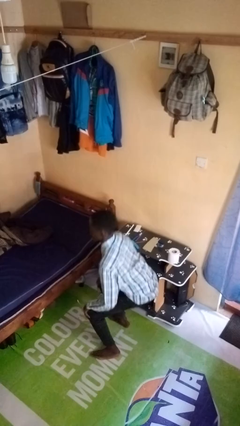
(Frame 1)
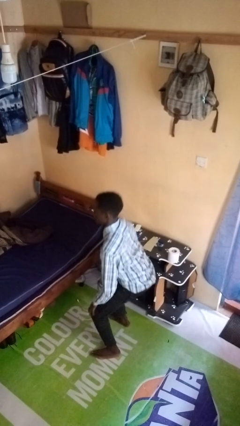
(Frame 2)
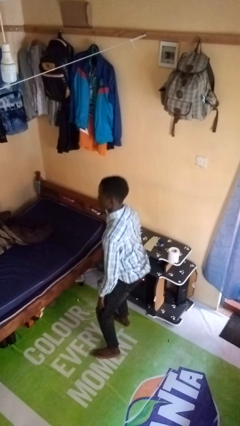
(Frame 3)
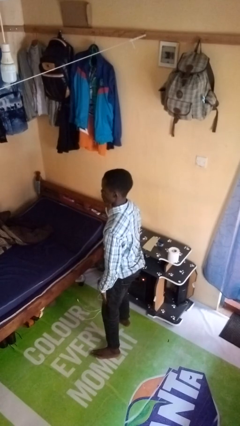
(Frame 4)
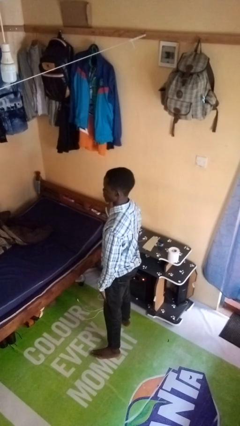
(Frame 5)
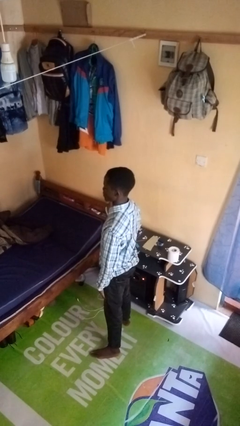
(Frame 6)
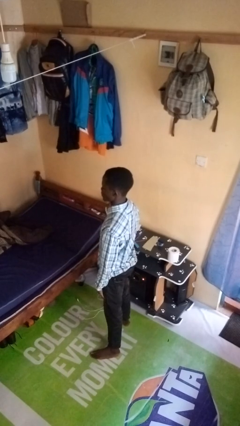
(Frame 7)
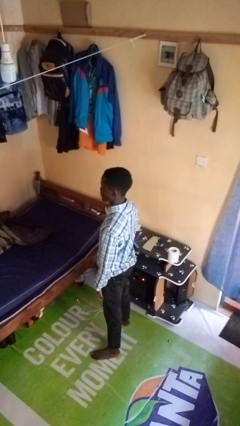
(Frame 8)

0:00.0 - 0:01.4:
person stands up

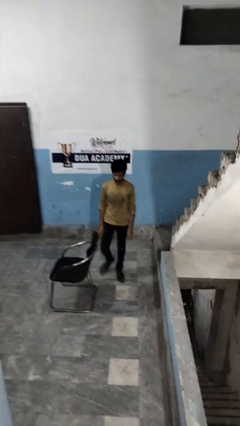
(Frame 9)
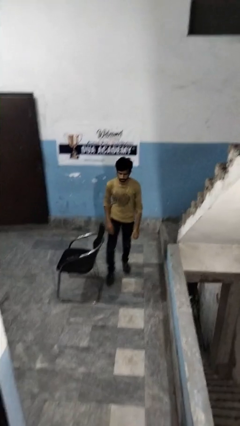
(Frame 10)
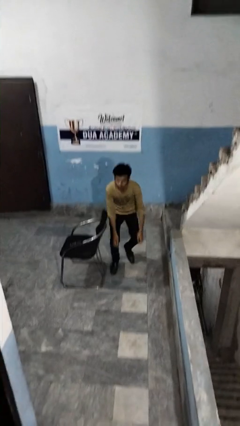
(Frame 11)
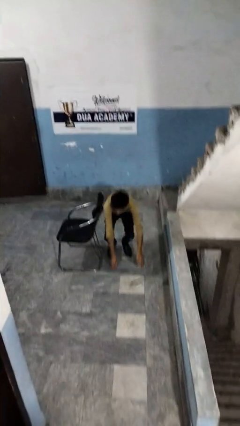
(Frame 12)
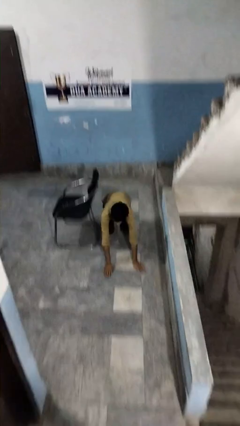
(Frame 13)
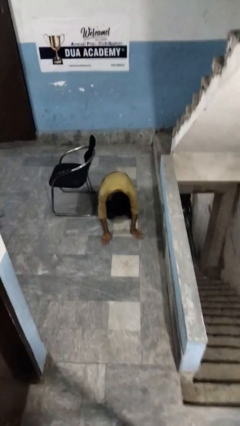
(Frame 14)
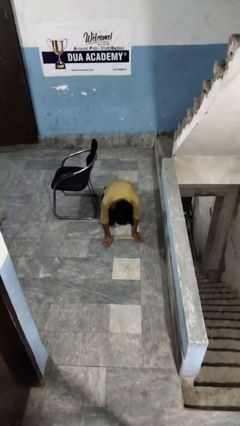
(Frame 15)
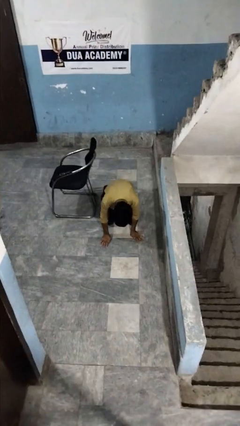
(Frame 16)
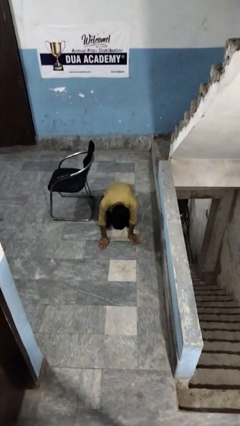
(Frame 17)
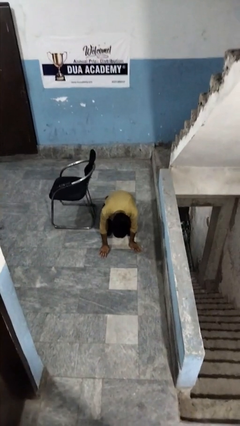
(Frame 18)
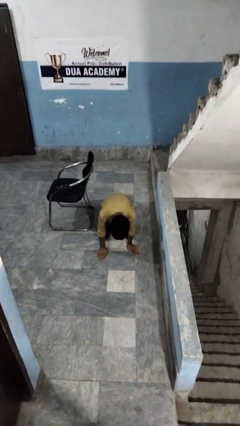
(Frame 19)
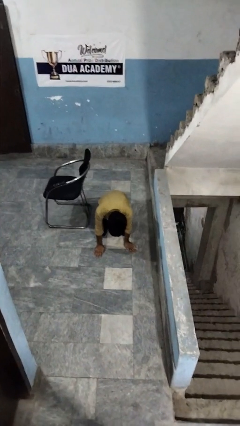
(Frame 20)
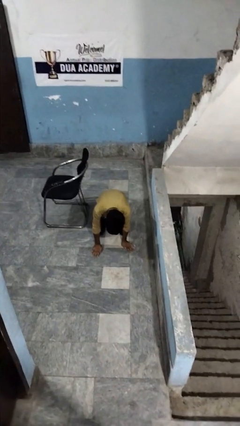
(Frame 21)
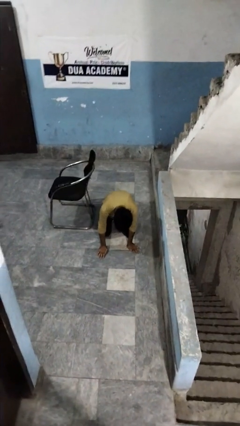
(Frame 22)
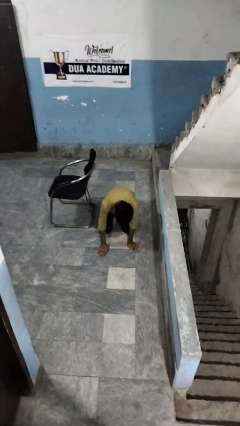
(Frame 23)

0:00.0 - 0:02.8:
person trips on object on floor

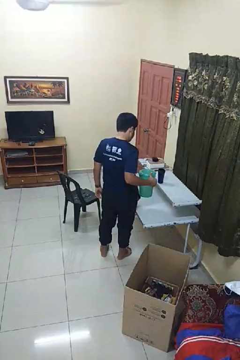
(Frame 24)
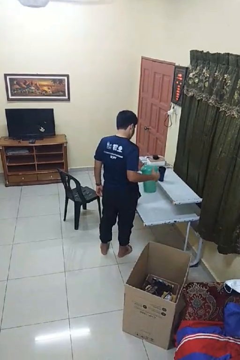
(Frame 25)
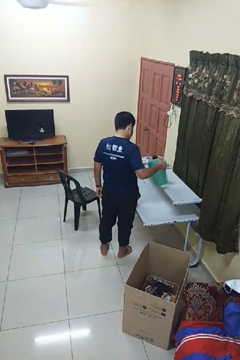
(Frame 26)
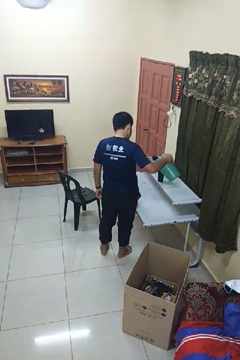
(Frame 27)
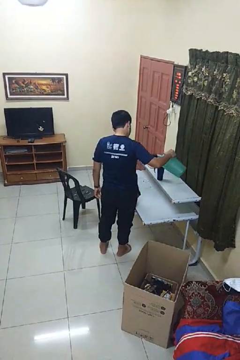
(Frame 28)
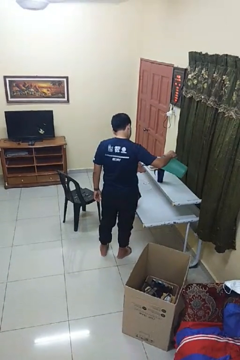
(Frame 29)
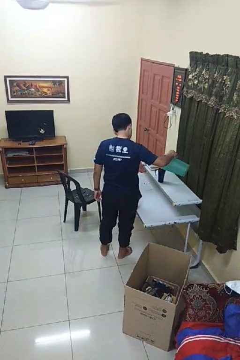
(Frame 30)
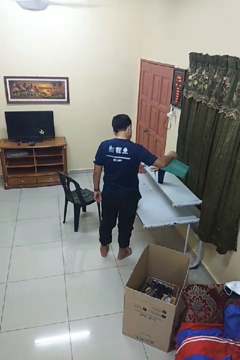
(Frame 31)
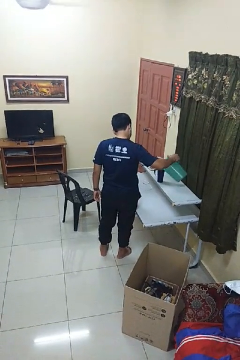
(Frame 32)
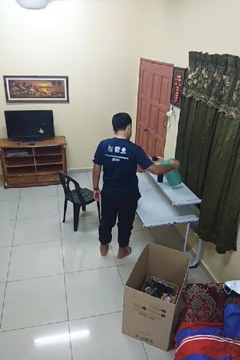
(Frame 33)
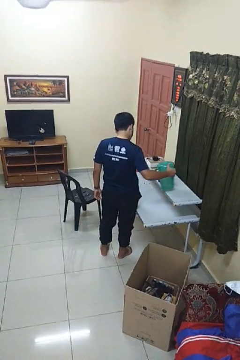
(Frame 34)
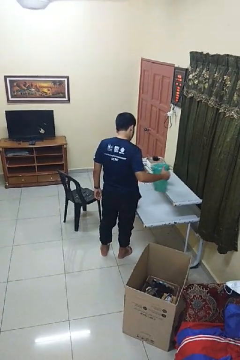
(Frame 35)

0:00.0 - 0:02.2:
person pours coffee into mug

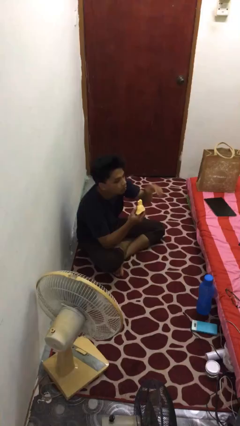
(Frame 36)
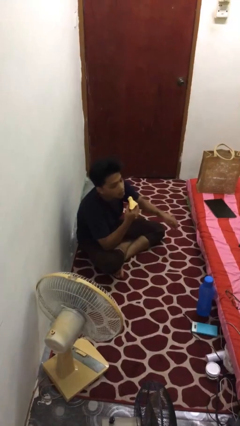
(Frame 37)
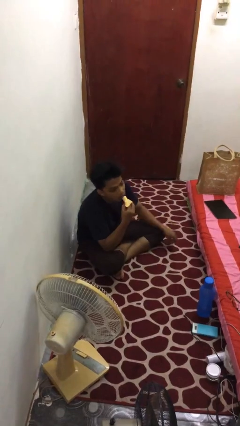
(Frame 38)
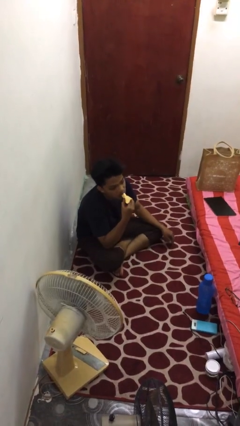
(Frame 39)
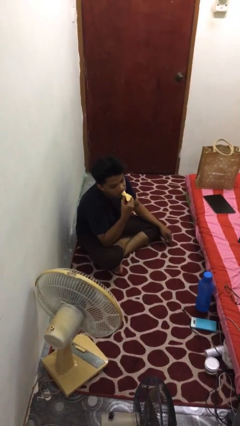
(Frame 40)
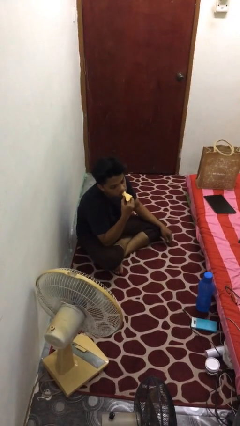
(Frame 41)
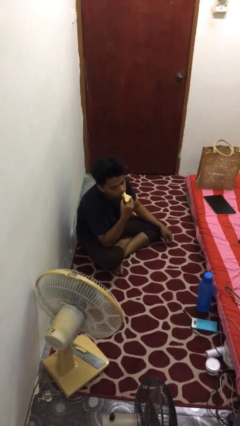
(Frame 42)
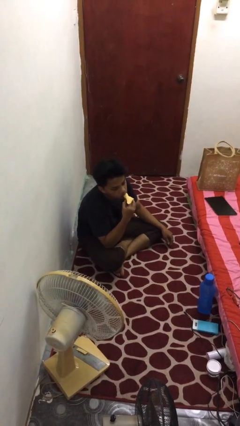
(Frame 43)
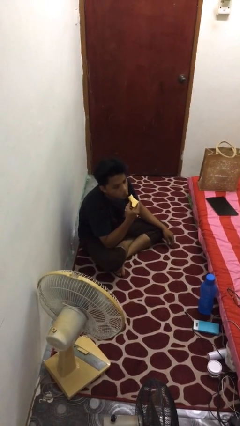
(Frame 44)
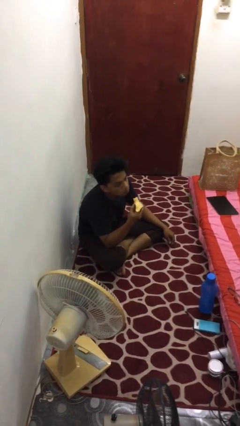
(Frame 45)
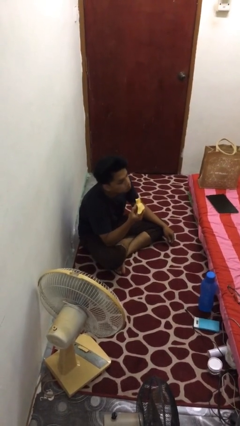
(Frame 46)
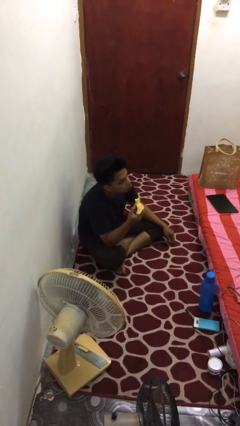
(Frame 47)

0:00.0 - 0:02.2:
person eats banana

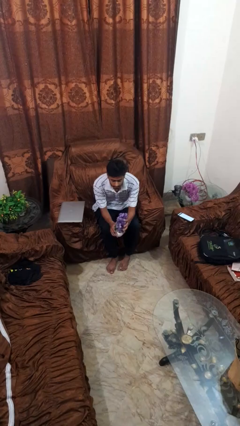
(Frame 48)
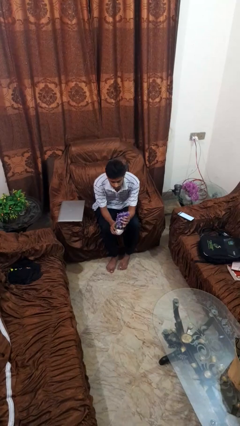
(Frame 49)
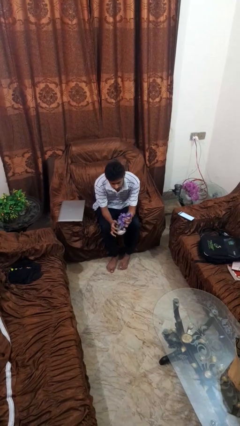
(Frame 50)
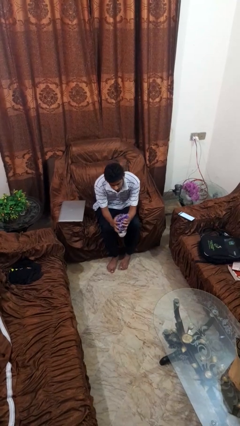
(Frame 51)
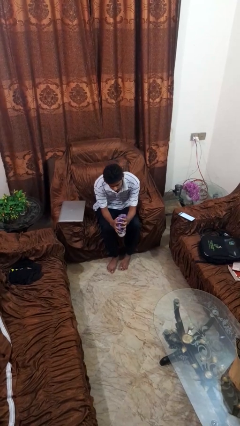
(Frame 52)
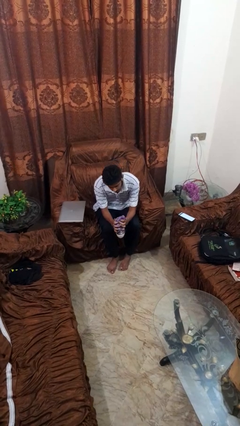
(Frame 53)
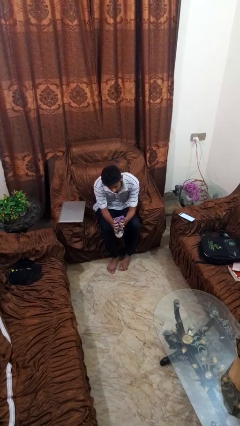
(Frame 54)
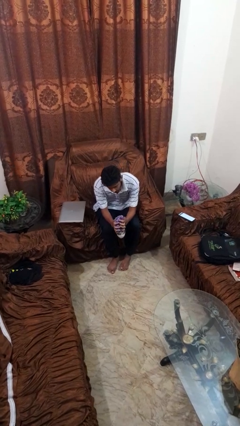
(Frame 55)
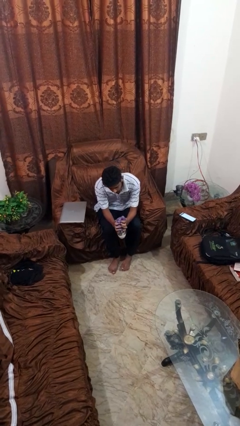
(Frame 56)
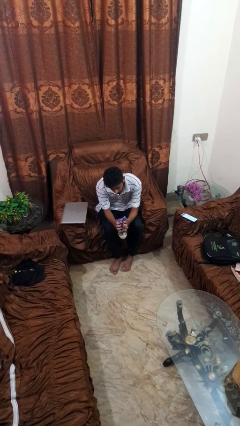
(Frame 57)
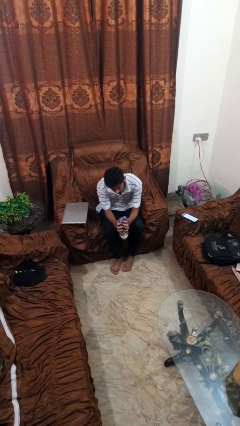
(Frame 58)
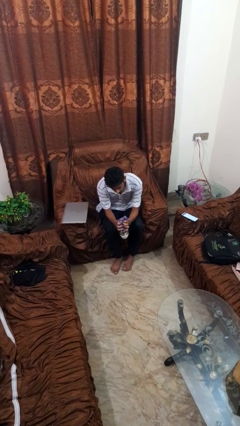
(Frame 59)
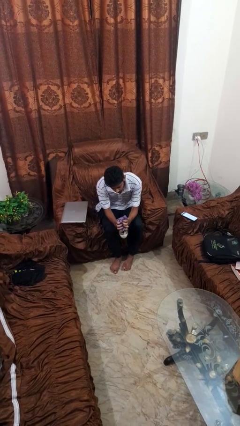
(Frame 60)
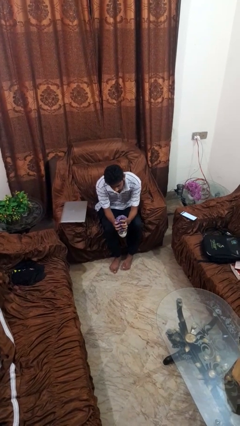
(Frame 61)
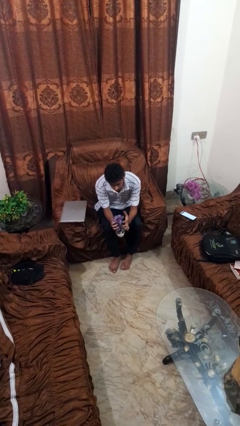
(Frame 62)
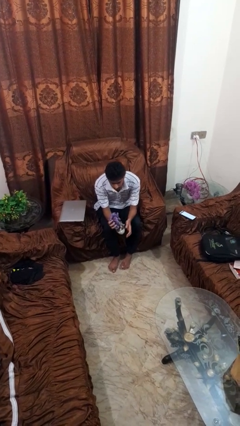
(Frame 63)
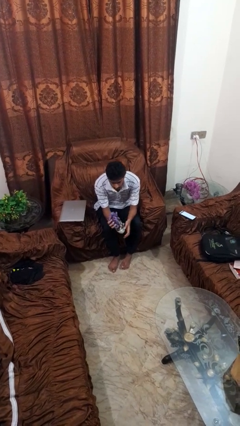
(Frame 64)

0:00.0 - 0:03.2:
person squeezes object

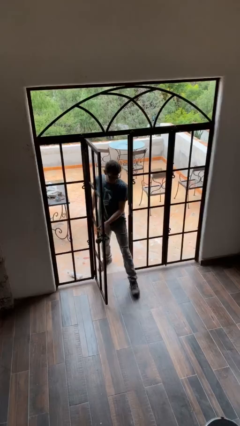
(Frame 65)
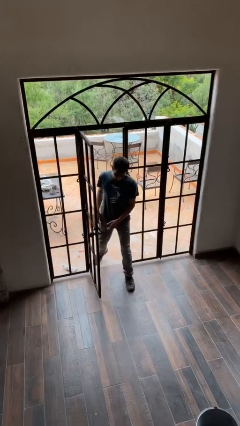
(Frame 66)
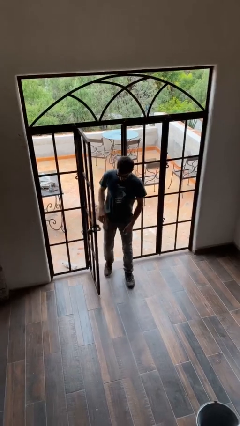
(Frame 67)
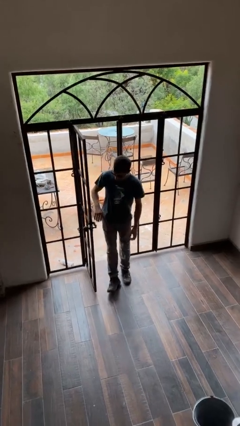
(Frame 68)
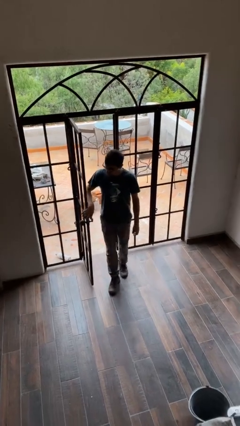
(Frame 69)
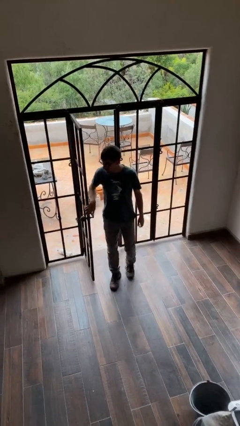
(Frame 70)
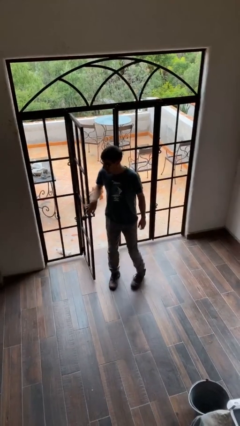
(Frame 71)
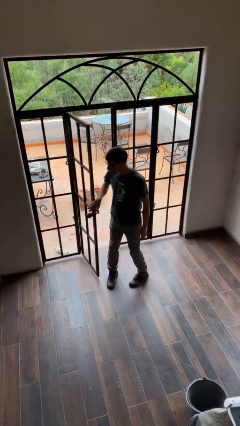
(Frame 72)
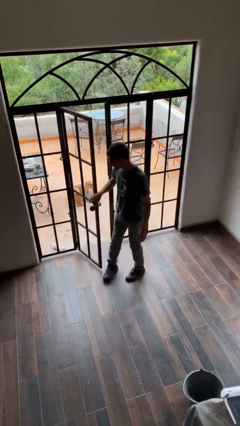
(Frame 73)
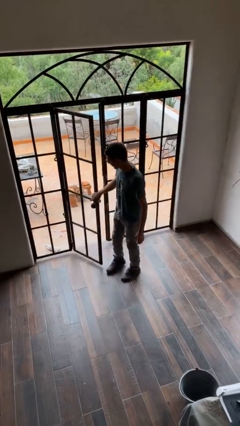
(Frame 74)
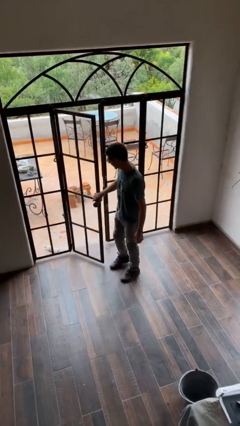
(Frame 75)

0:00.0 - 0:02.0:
person enters scene through structure

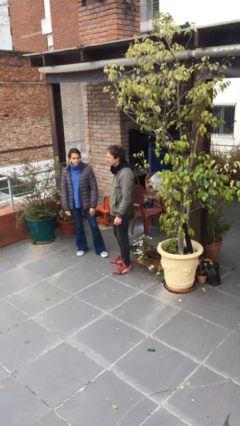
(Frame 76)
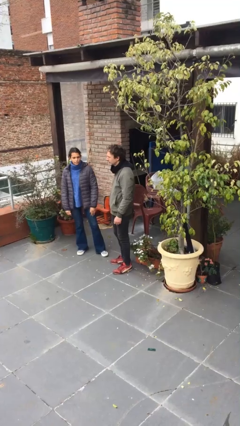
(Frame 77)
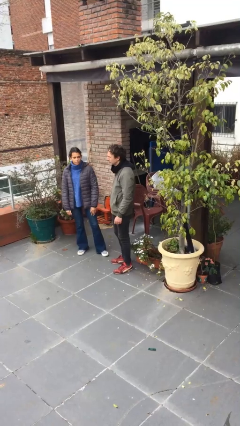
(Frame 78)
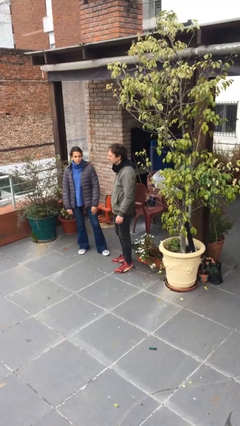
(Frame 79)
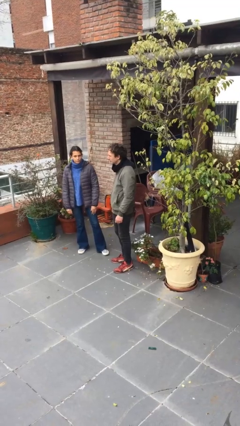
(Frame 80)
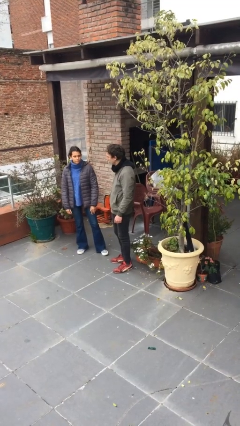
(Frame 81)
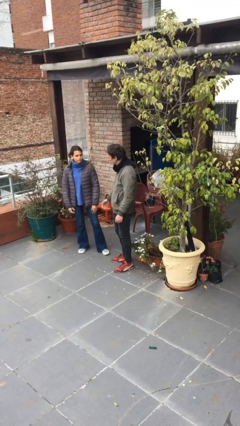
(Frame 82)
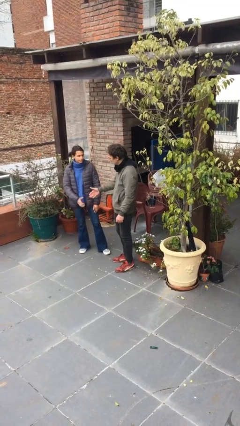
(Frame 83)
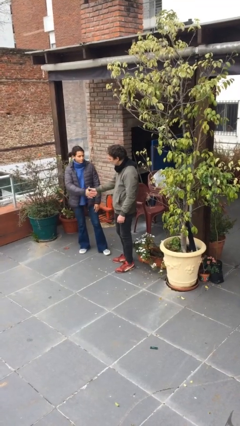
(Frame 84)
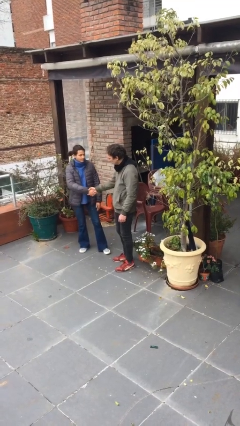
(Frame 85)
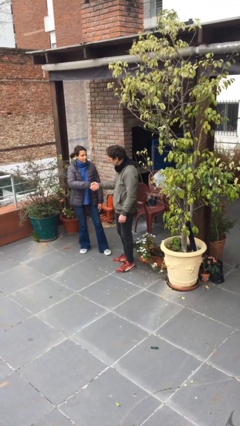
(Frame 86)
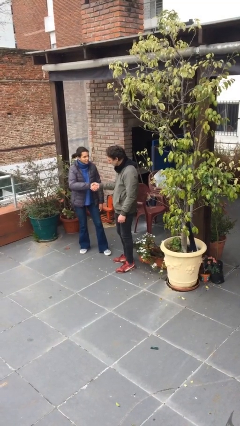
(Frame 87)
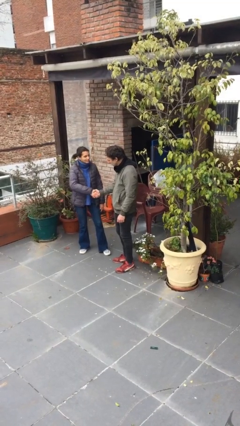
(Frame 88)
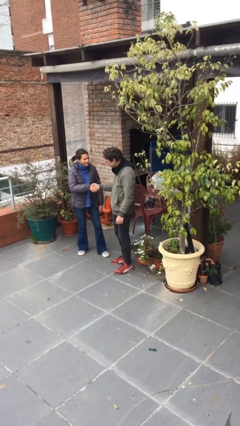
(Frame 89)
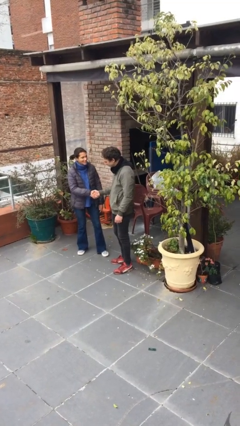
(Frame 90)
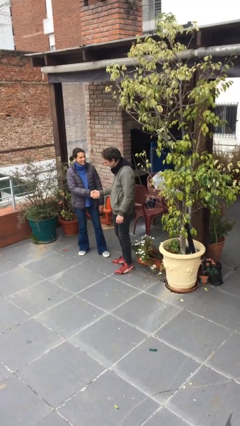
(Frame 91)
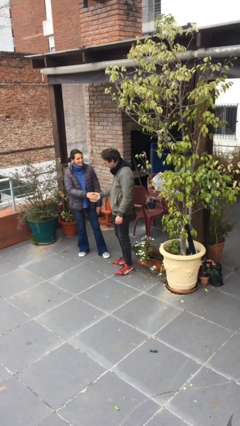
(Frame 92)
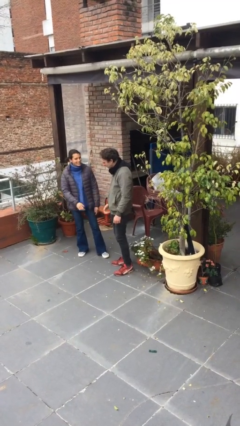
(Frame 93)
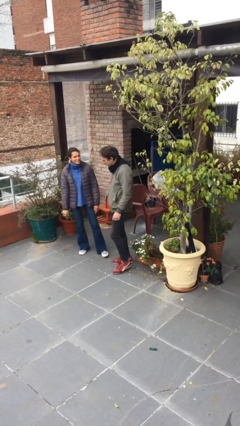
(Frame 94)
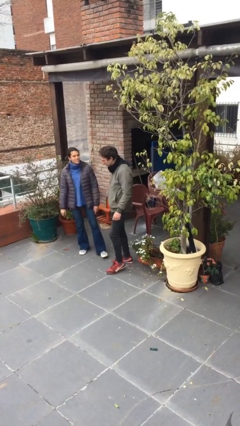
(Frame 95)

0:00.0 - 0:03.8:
person shakes hand
